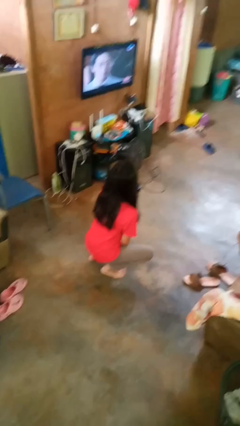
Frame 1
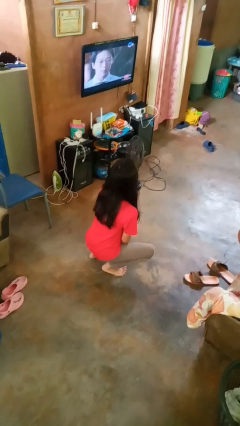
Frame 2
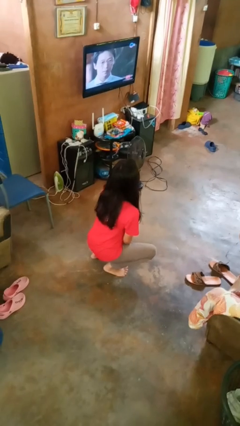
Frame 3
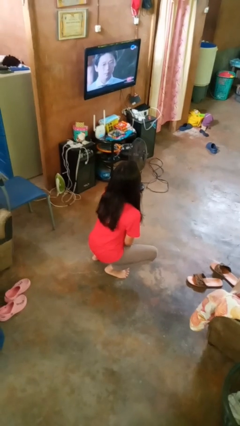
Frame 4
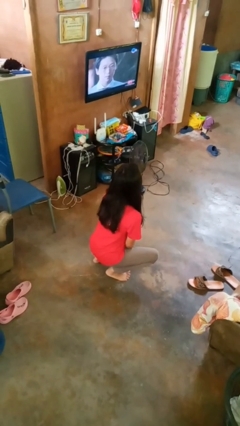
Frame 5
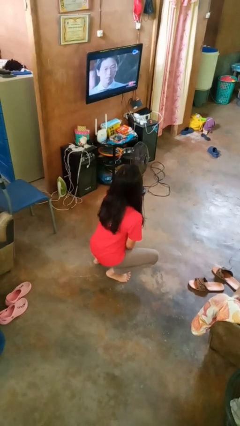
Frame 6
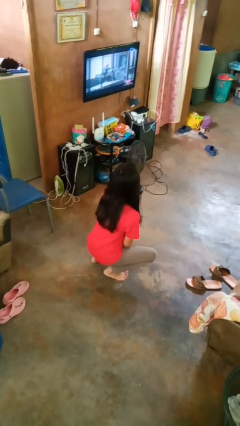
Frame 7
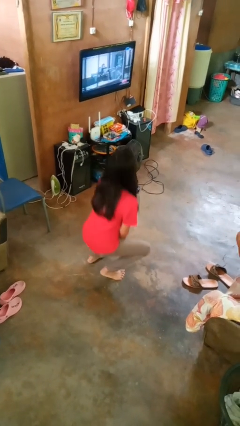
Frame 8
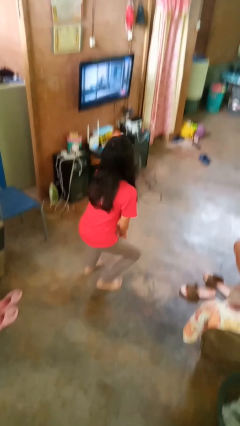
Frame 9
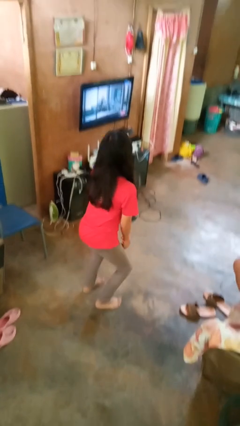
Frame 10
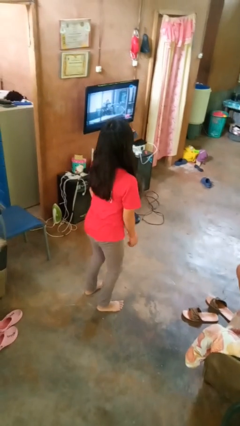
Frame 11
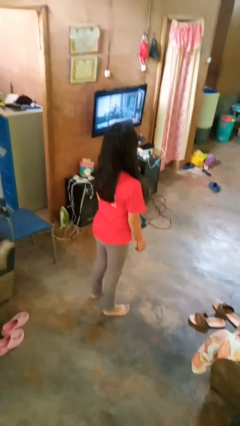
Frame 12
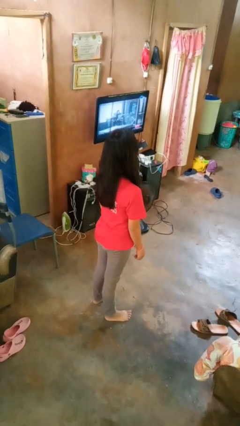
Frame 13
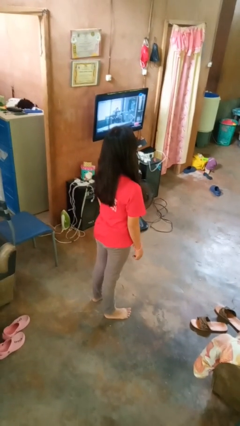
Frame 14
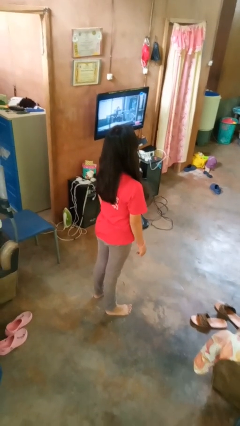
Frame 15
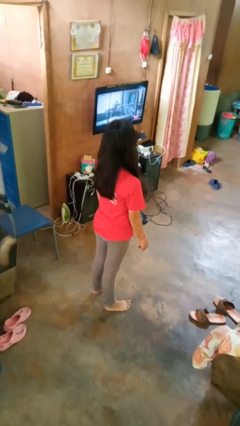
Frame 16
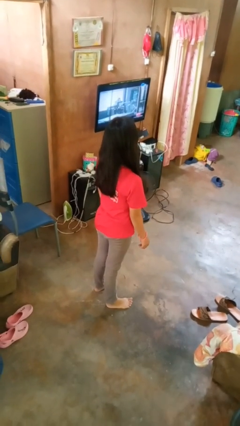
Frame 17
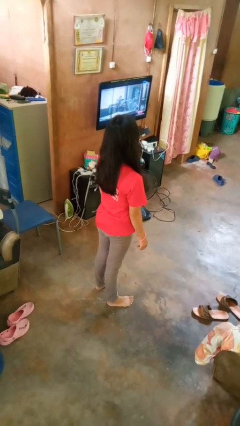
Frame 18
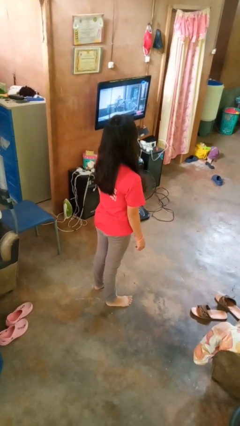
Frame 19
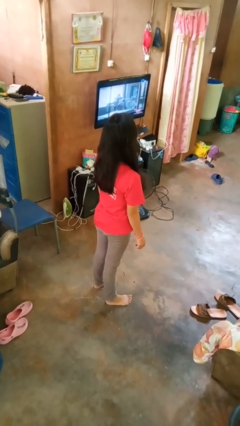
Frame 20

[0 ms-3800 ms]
person stands up

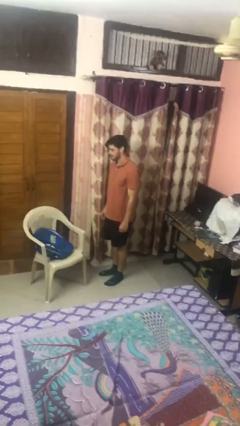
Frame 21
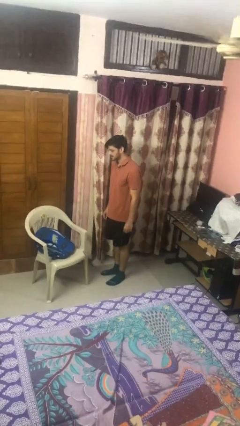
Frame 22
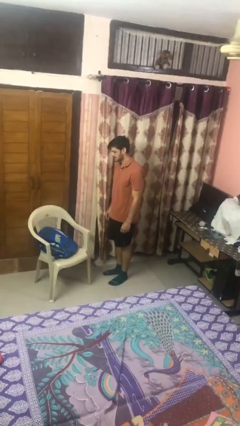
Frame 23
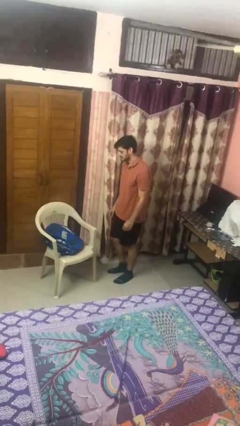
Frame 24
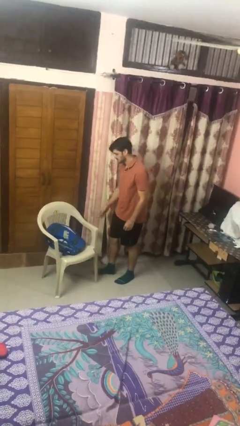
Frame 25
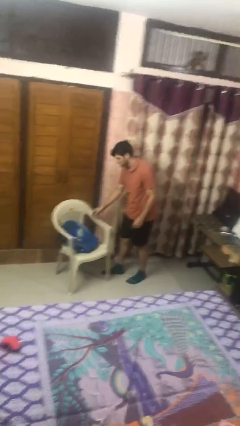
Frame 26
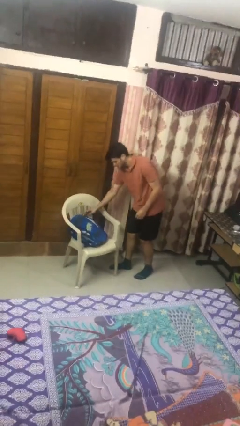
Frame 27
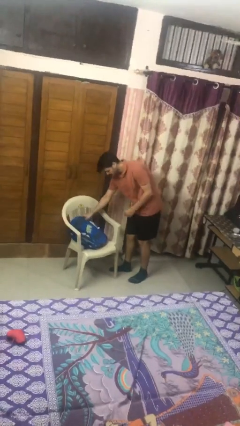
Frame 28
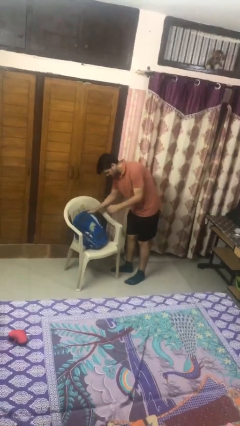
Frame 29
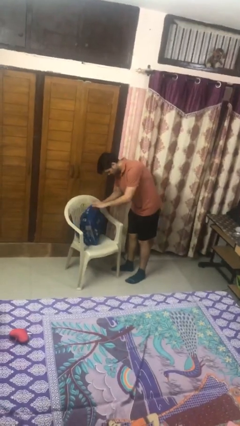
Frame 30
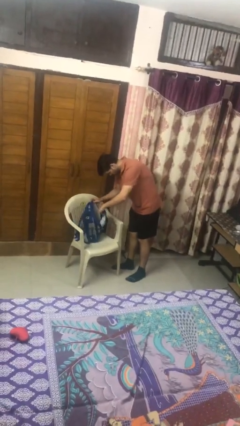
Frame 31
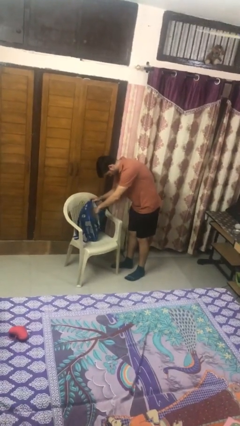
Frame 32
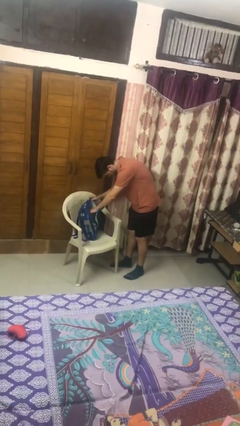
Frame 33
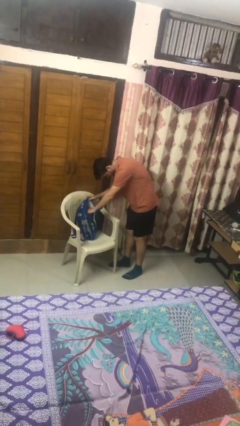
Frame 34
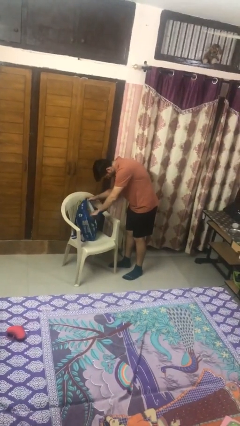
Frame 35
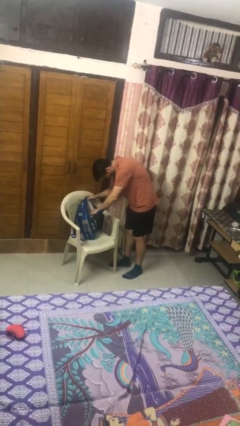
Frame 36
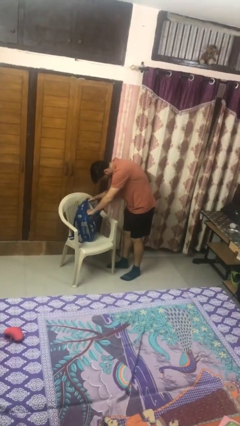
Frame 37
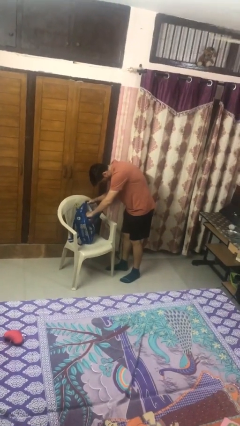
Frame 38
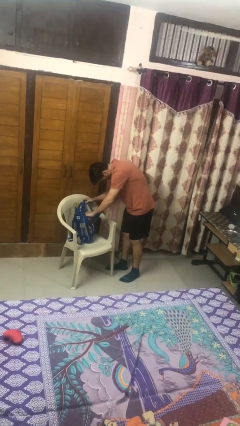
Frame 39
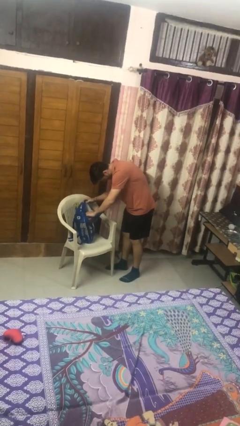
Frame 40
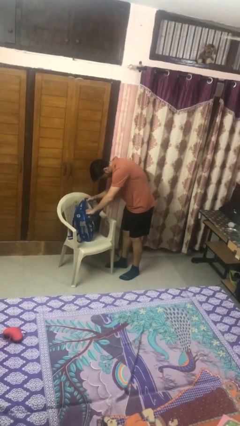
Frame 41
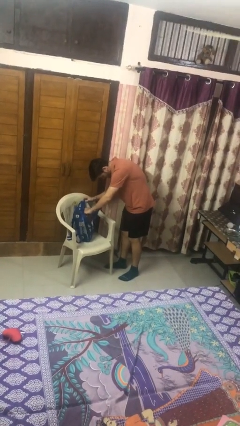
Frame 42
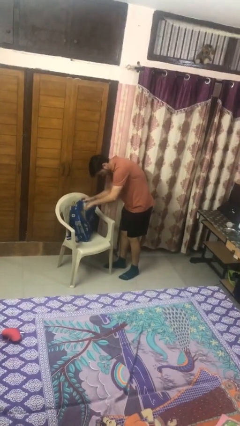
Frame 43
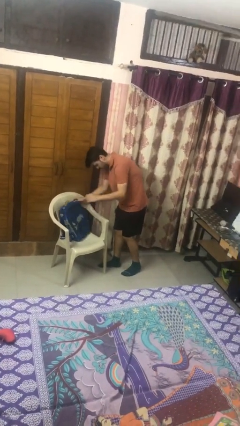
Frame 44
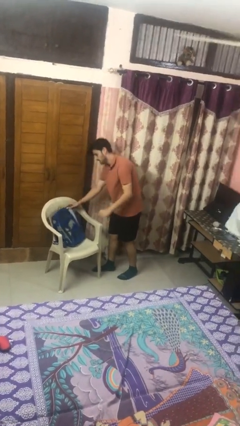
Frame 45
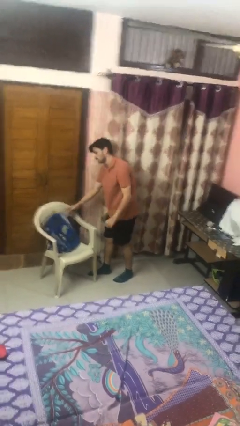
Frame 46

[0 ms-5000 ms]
person searches in bag

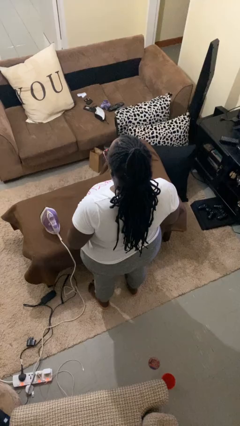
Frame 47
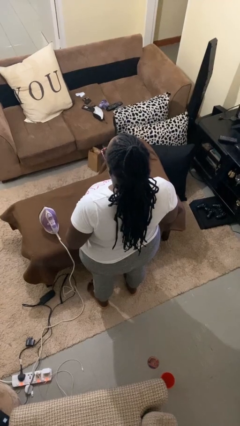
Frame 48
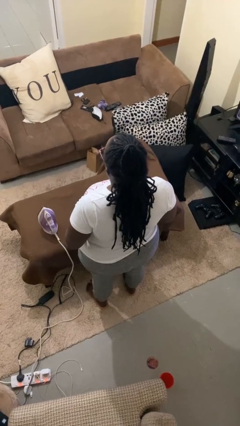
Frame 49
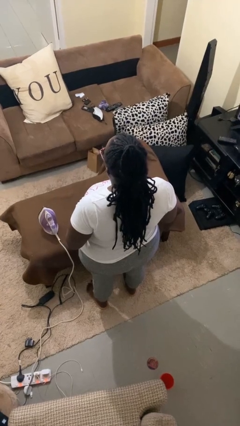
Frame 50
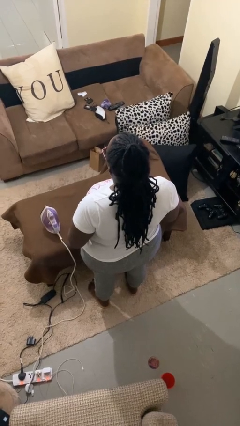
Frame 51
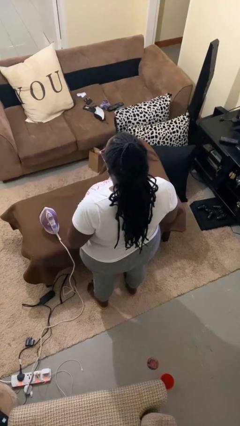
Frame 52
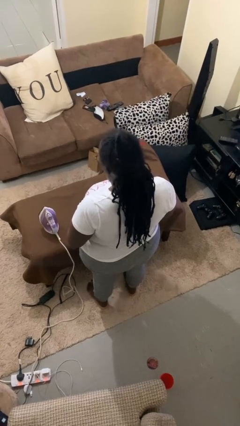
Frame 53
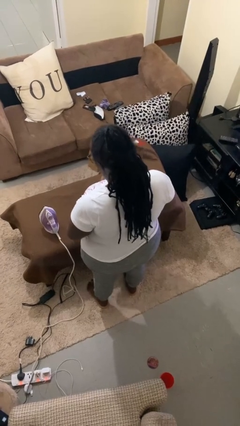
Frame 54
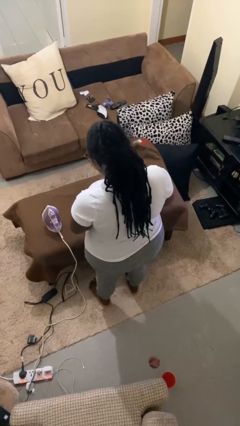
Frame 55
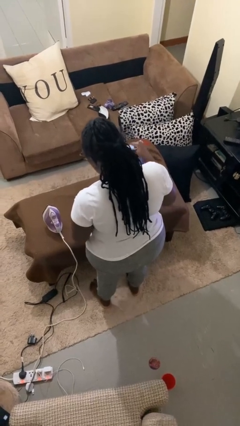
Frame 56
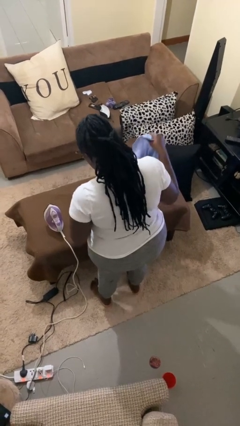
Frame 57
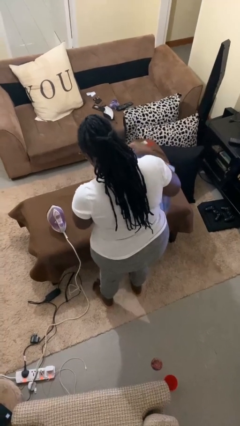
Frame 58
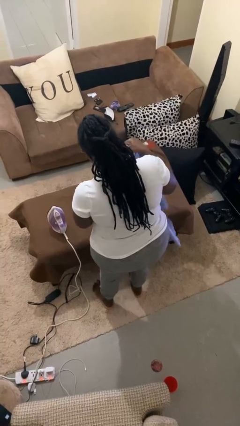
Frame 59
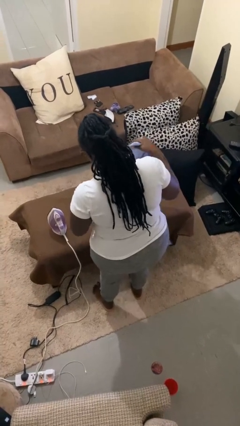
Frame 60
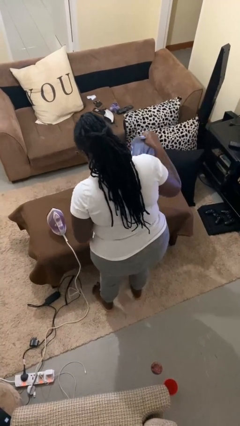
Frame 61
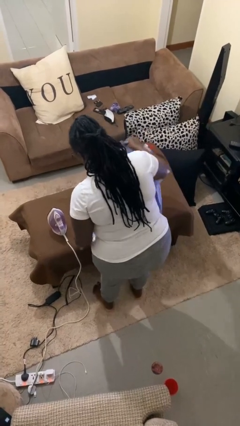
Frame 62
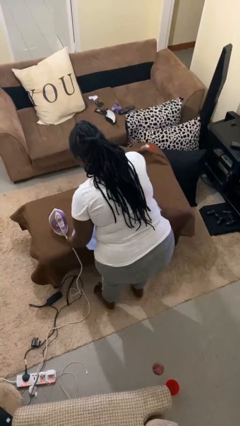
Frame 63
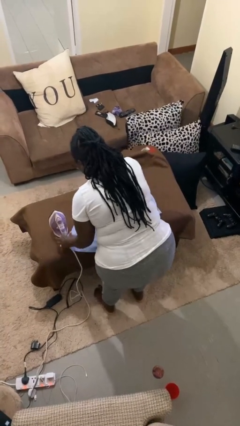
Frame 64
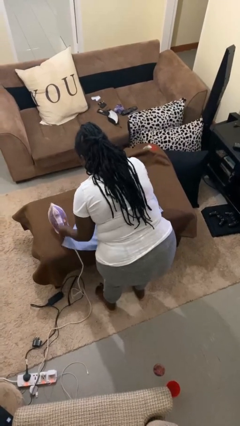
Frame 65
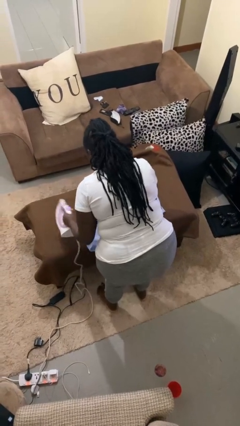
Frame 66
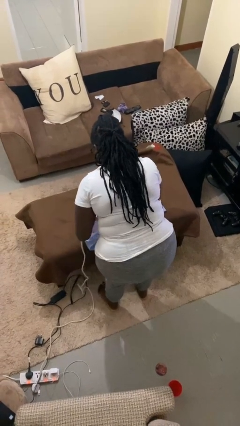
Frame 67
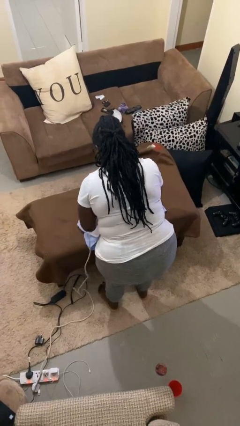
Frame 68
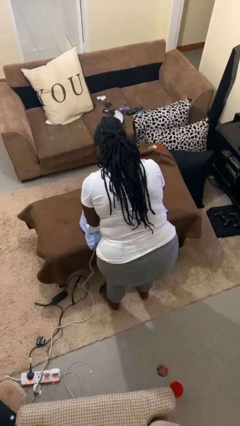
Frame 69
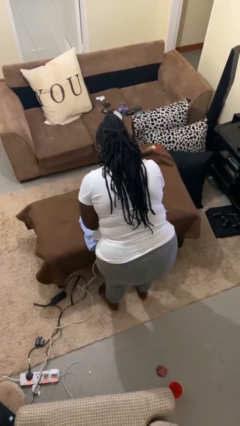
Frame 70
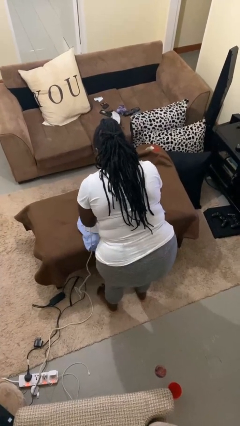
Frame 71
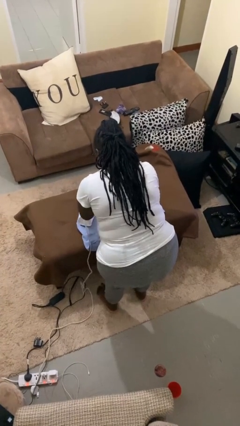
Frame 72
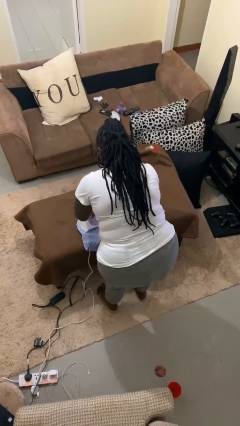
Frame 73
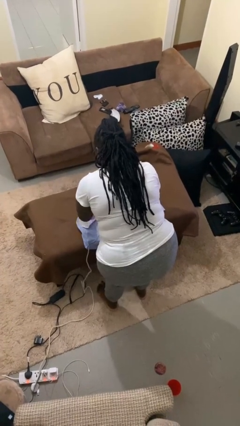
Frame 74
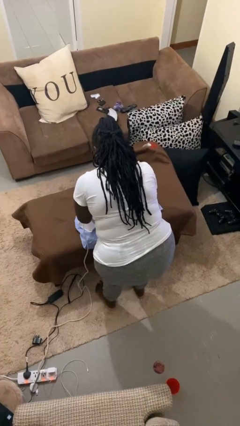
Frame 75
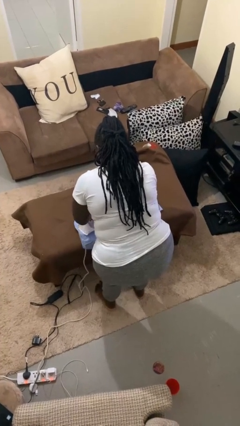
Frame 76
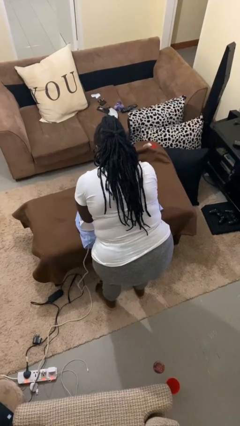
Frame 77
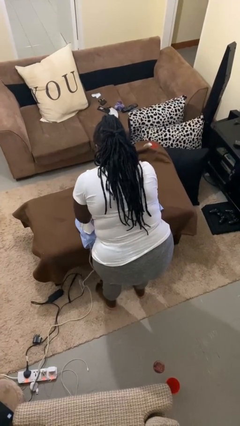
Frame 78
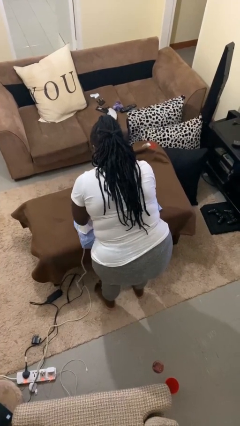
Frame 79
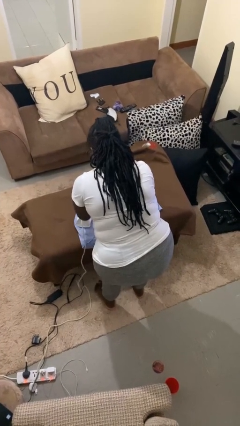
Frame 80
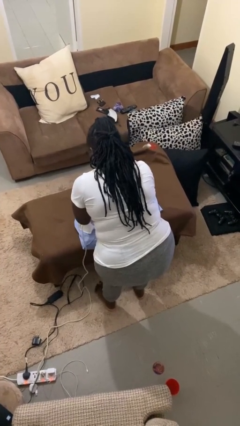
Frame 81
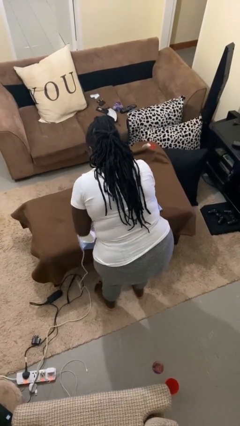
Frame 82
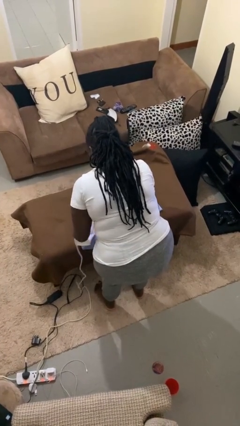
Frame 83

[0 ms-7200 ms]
person irons clothes

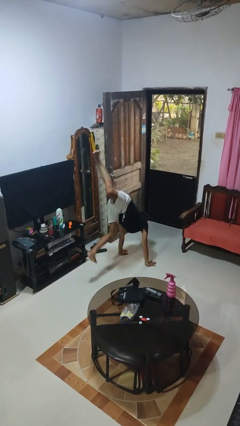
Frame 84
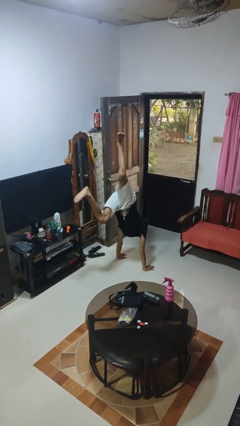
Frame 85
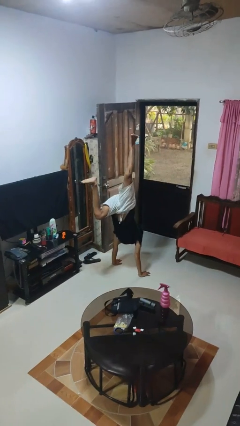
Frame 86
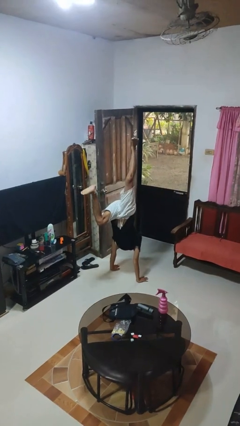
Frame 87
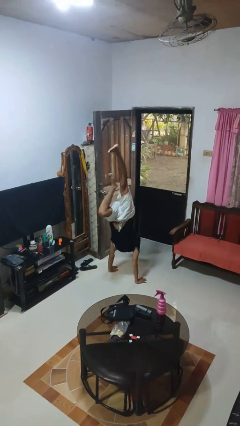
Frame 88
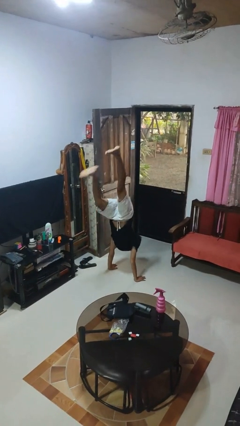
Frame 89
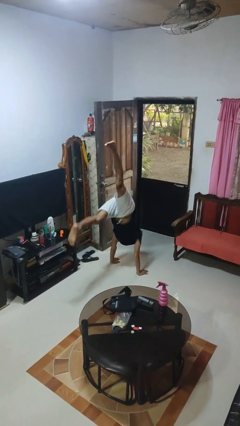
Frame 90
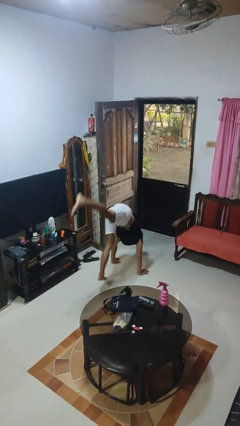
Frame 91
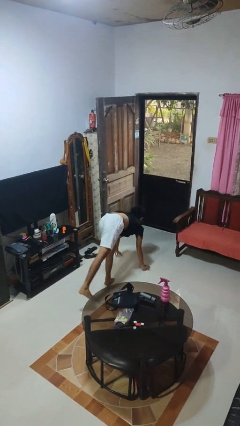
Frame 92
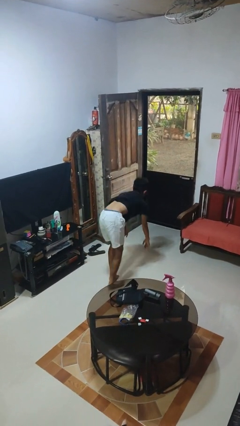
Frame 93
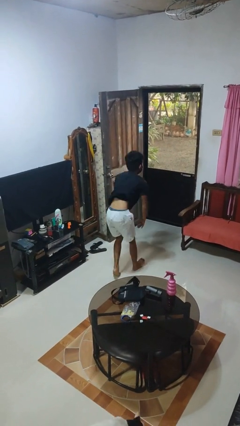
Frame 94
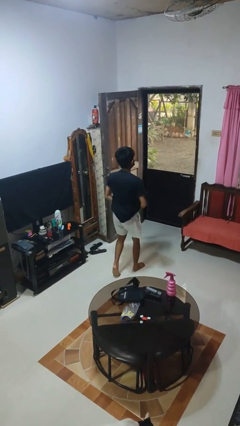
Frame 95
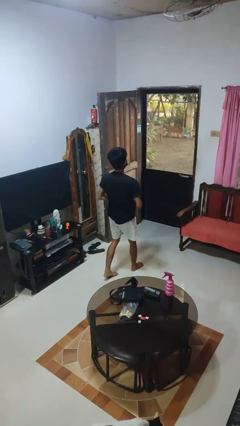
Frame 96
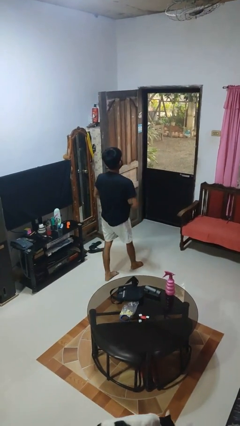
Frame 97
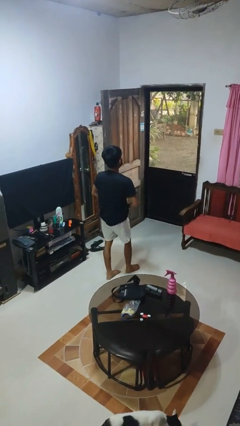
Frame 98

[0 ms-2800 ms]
person handstand
